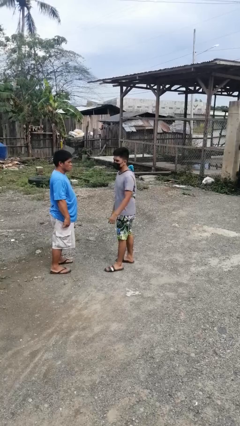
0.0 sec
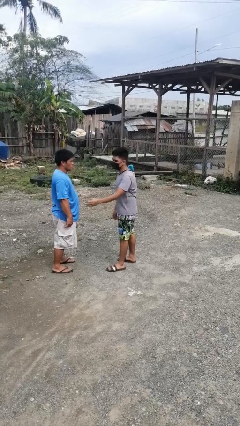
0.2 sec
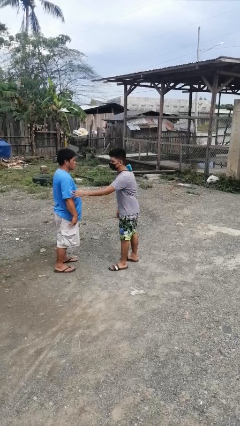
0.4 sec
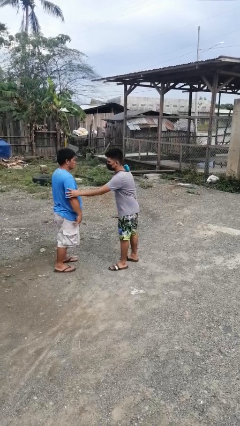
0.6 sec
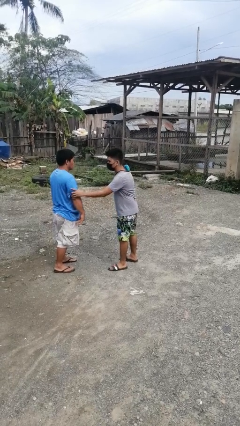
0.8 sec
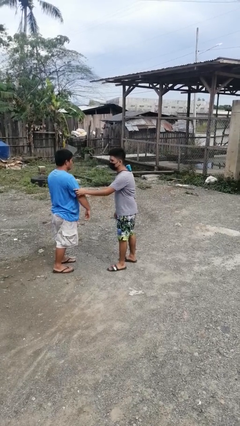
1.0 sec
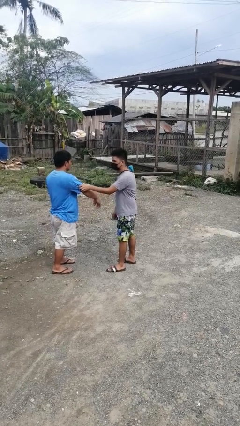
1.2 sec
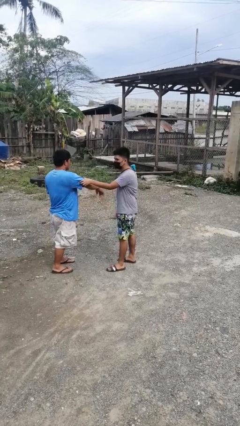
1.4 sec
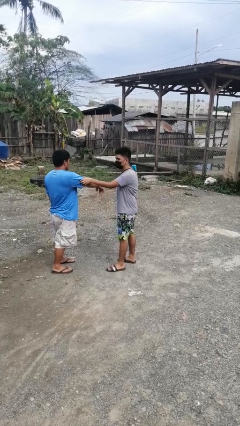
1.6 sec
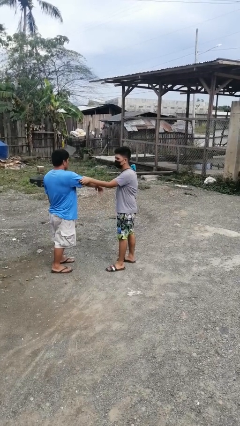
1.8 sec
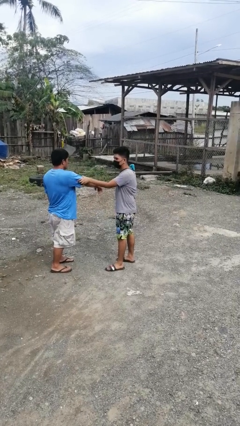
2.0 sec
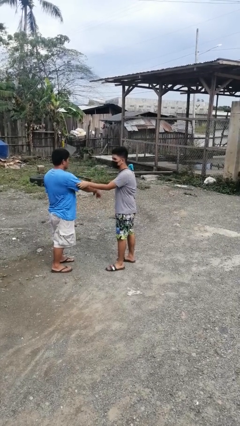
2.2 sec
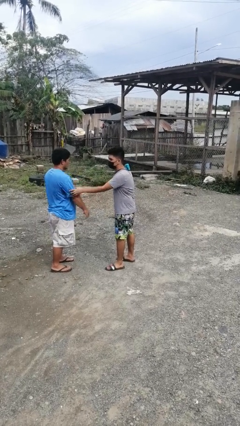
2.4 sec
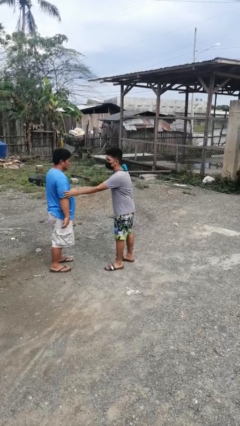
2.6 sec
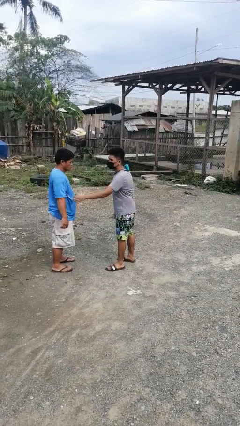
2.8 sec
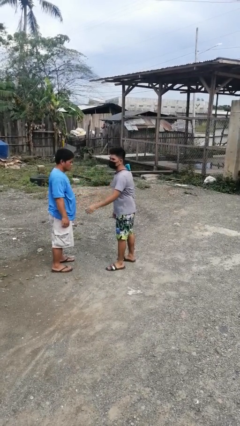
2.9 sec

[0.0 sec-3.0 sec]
person grabs person by bicep

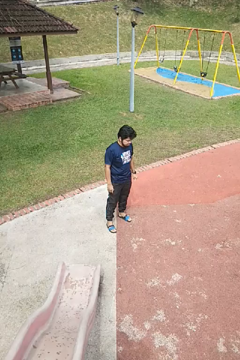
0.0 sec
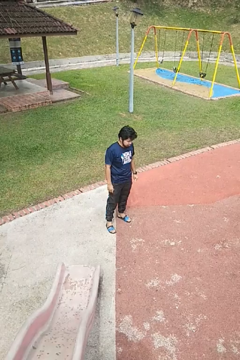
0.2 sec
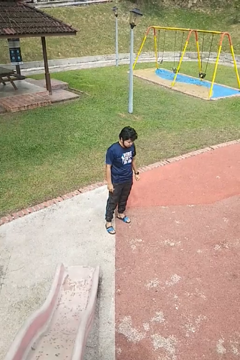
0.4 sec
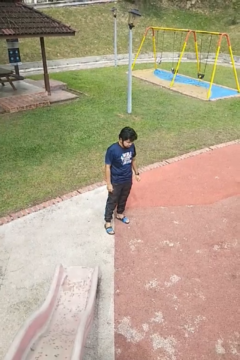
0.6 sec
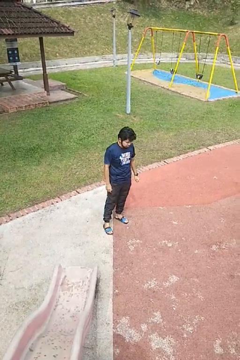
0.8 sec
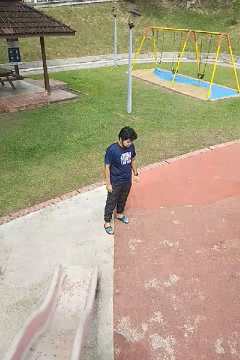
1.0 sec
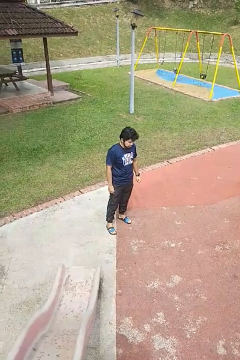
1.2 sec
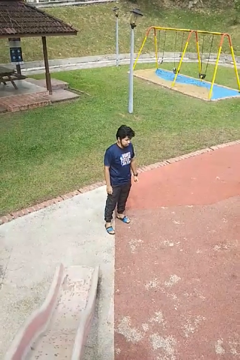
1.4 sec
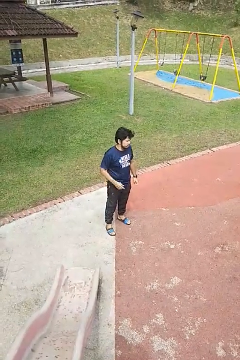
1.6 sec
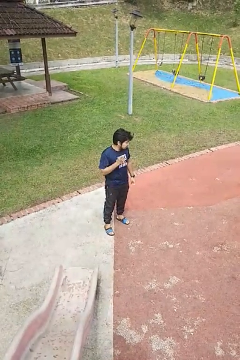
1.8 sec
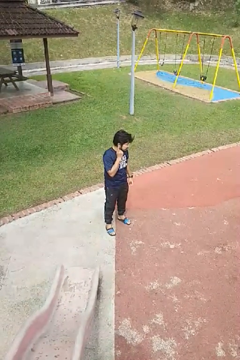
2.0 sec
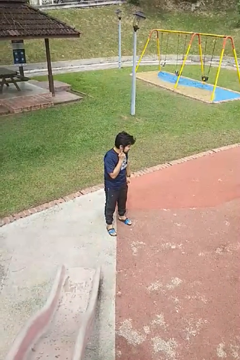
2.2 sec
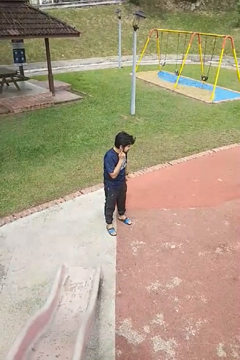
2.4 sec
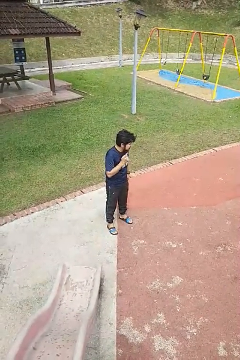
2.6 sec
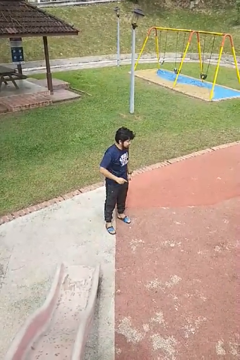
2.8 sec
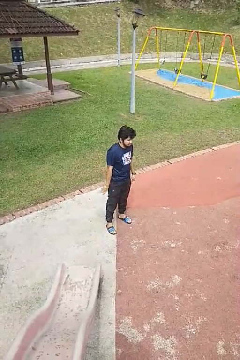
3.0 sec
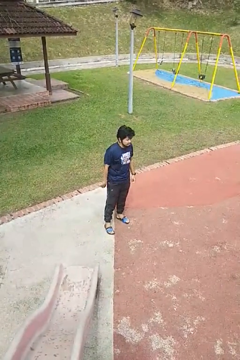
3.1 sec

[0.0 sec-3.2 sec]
person gestures listen closely

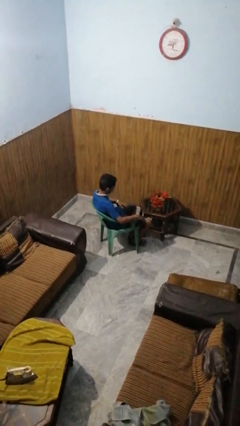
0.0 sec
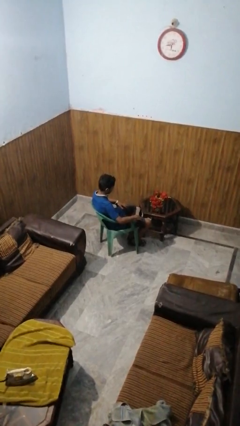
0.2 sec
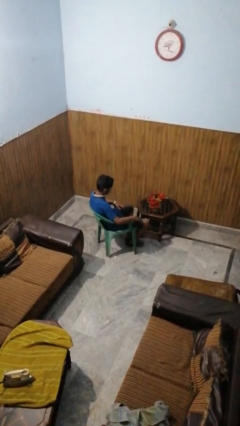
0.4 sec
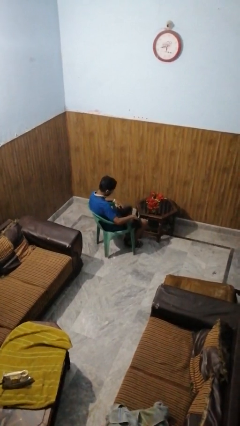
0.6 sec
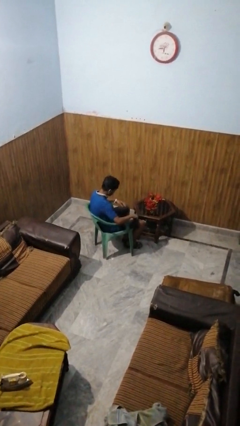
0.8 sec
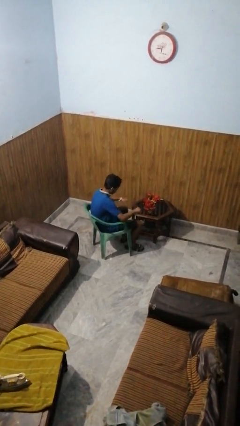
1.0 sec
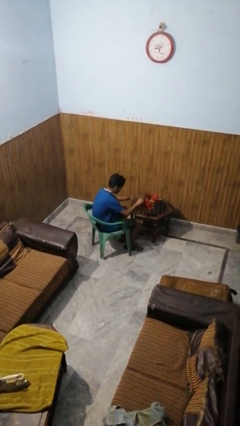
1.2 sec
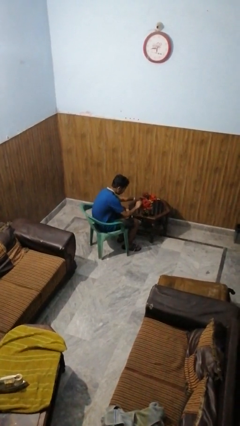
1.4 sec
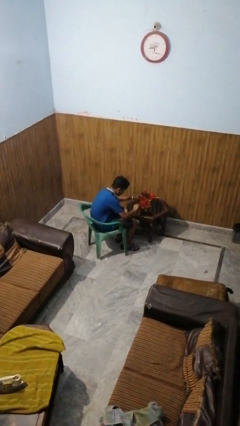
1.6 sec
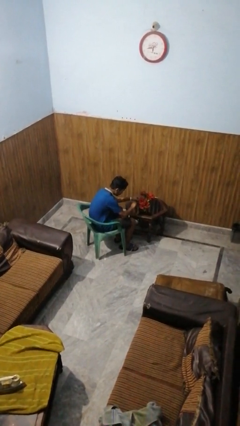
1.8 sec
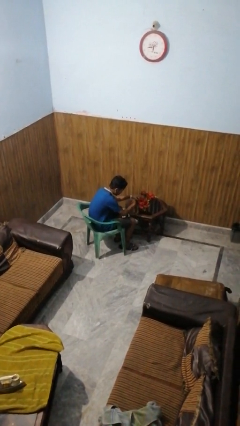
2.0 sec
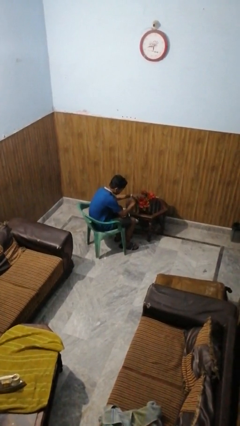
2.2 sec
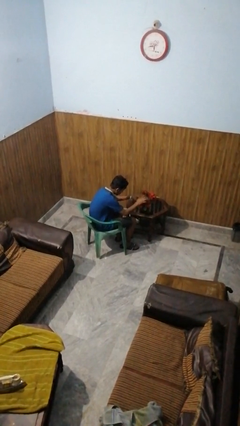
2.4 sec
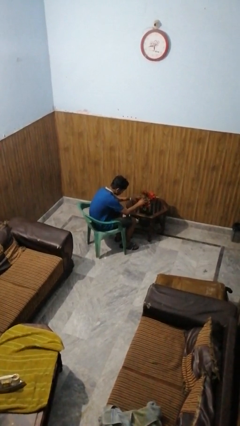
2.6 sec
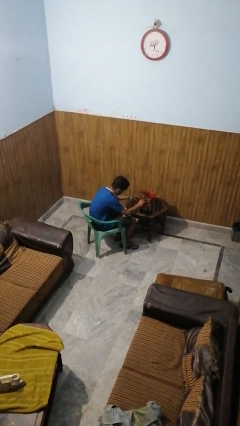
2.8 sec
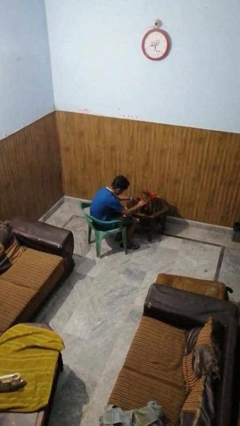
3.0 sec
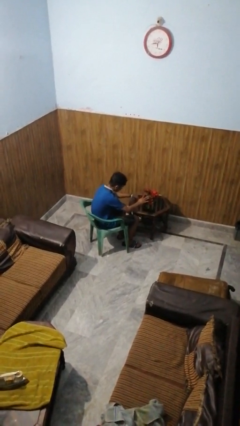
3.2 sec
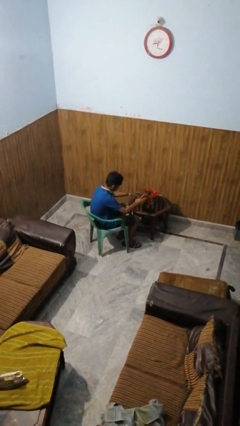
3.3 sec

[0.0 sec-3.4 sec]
person arranges flowers in vase

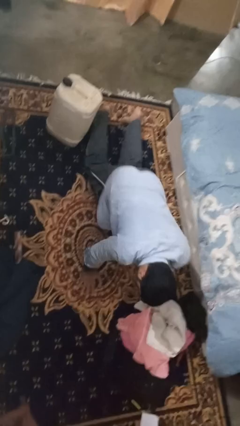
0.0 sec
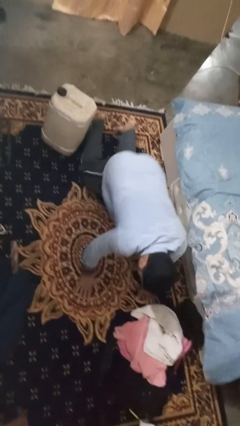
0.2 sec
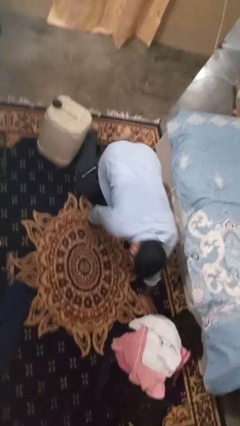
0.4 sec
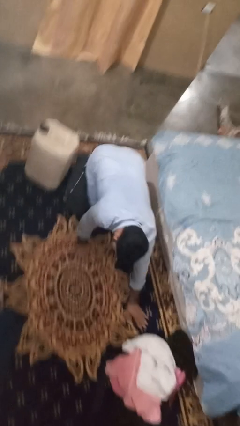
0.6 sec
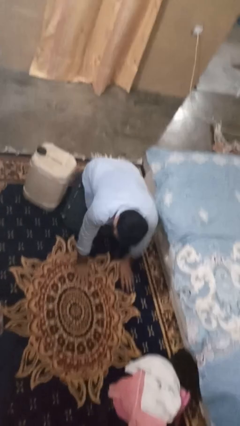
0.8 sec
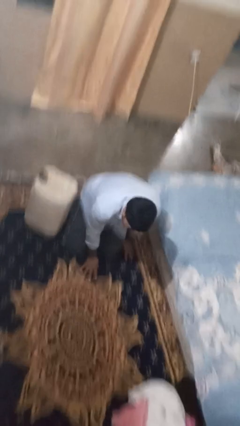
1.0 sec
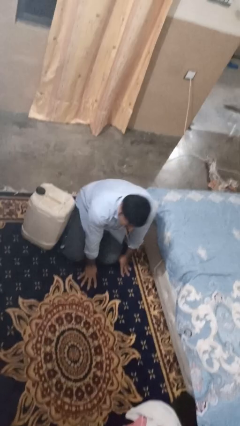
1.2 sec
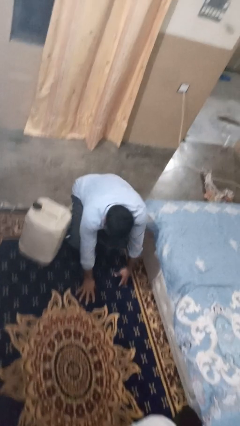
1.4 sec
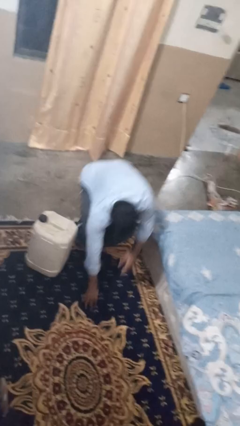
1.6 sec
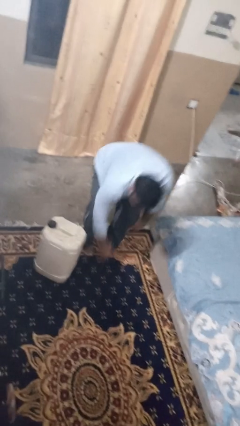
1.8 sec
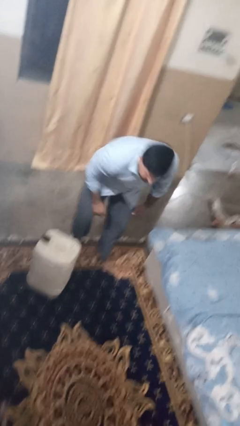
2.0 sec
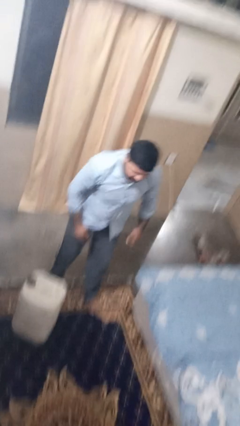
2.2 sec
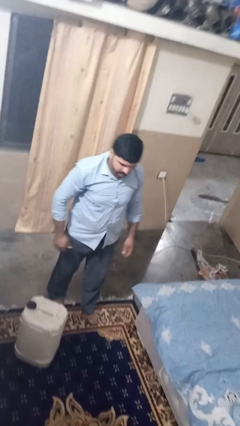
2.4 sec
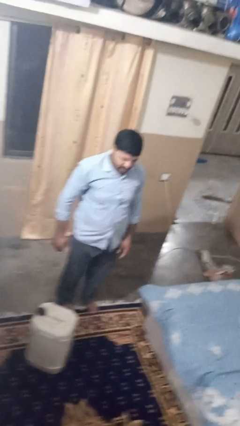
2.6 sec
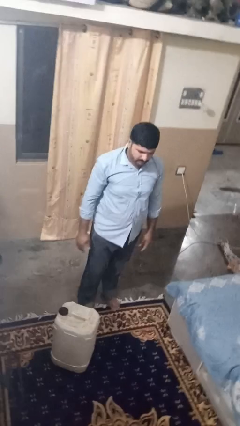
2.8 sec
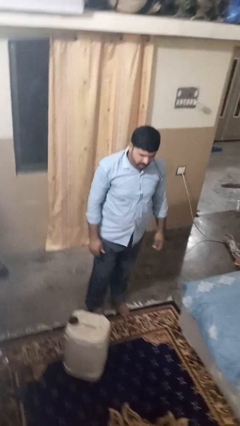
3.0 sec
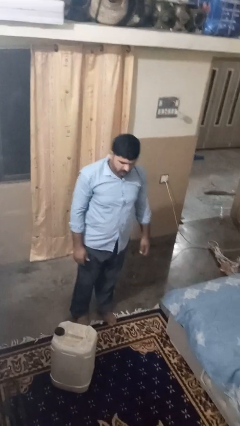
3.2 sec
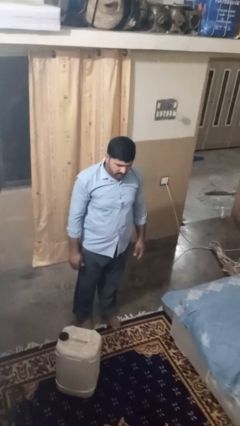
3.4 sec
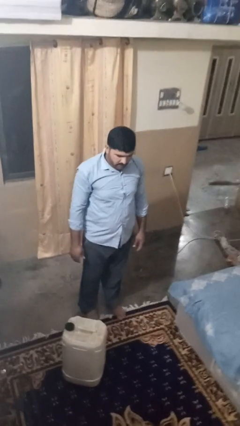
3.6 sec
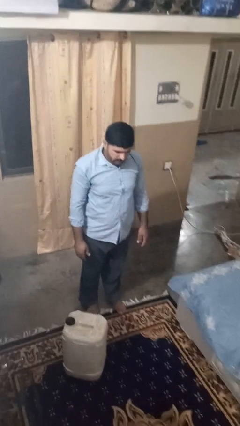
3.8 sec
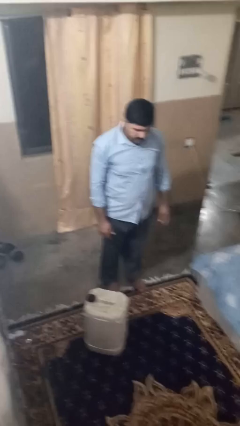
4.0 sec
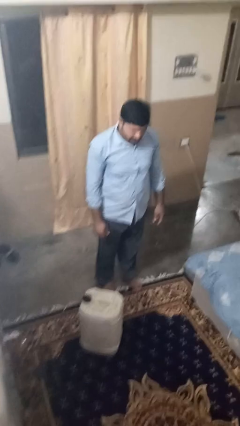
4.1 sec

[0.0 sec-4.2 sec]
person stands up from floor

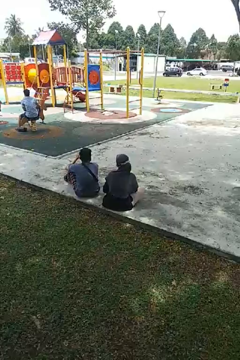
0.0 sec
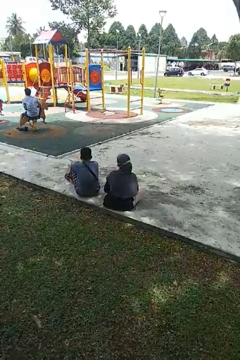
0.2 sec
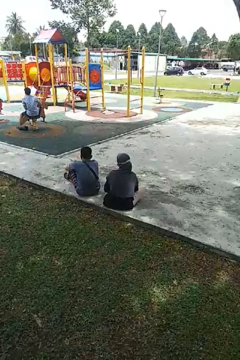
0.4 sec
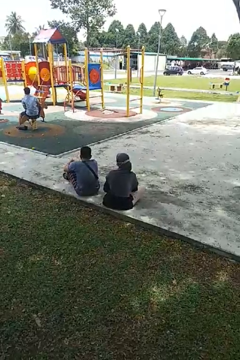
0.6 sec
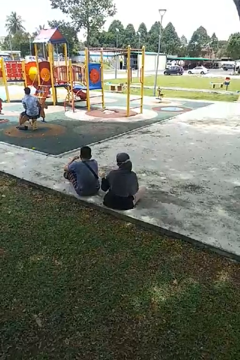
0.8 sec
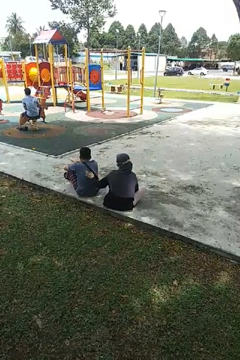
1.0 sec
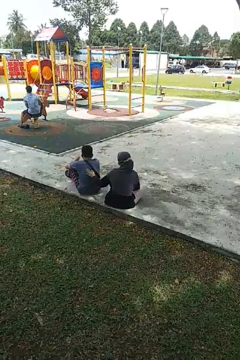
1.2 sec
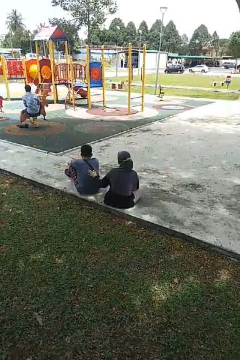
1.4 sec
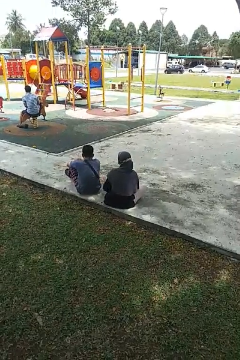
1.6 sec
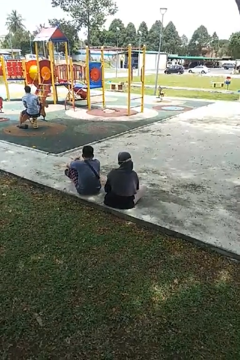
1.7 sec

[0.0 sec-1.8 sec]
person touches back of person

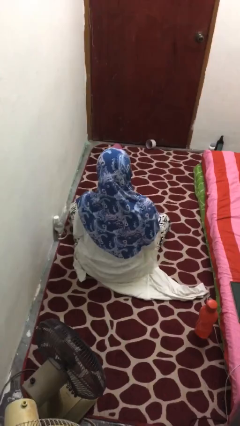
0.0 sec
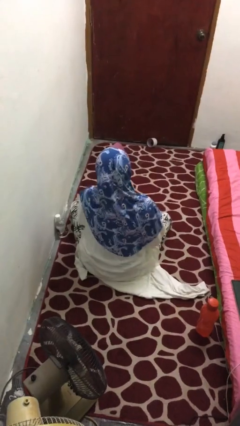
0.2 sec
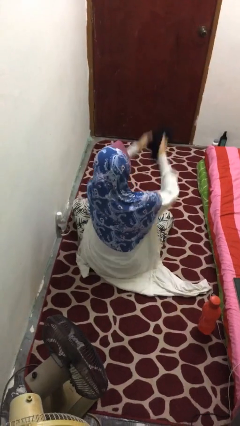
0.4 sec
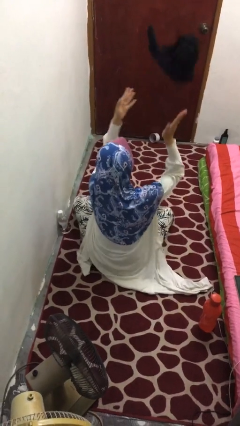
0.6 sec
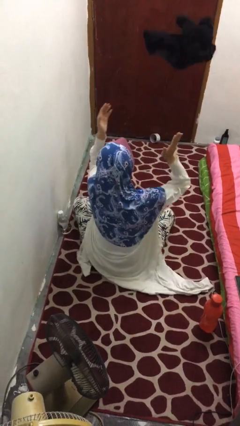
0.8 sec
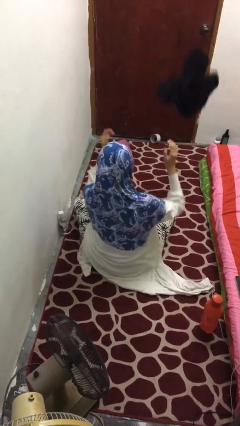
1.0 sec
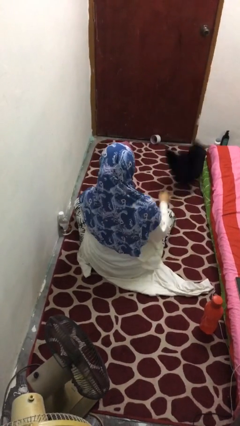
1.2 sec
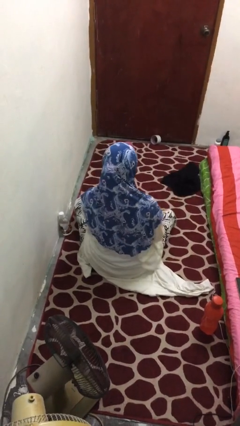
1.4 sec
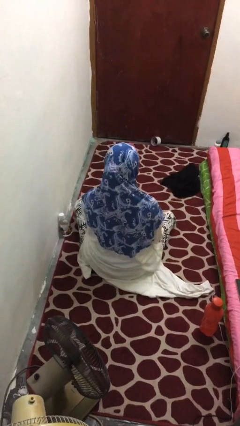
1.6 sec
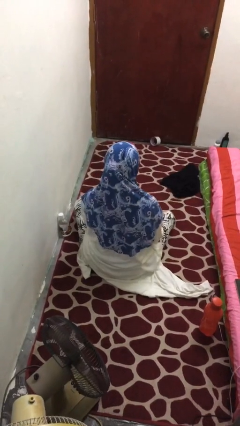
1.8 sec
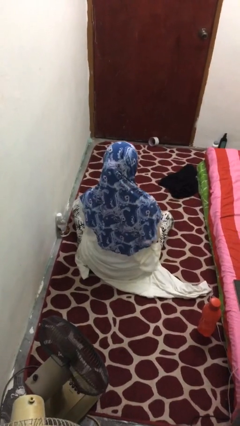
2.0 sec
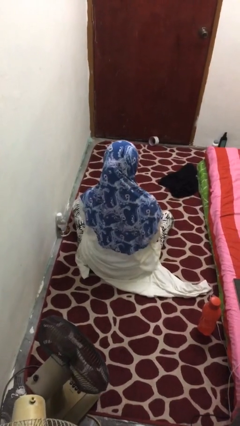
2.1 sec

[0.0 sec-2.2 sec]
person throws object into air

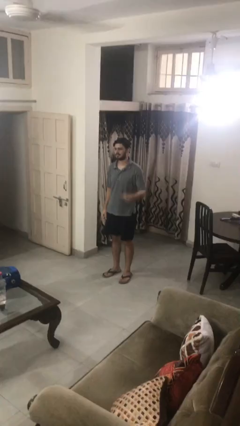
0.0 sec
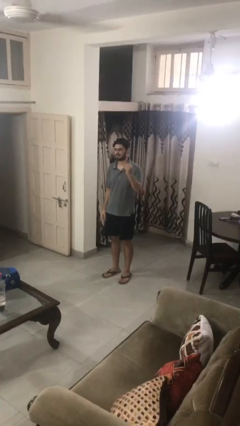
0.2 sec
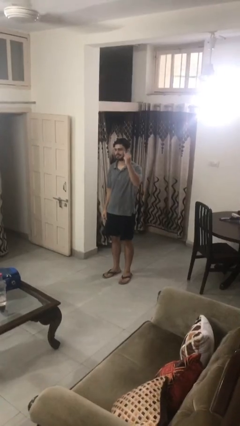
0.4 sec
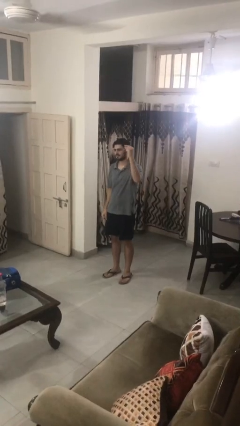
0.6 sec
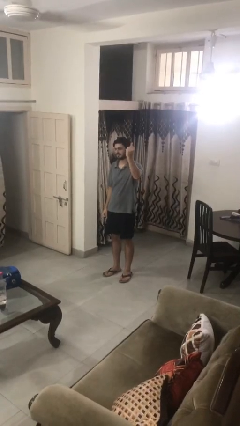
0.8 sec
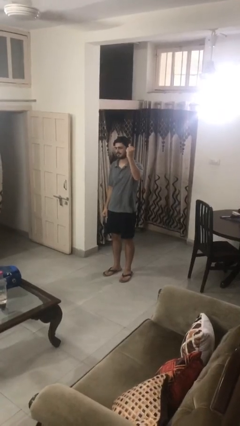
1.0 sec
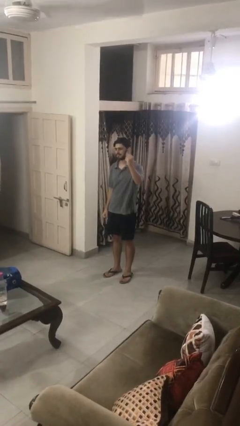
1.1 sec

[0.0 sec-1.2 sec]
person snaps fingers
